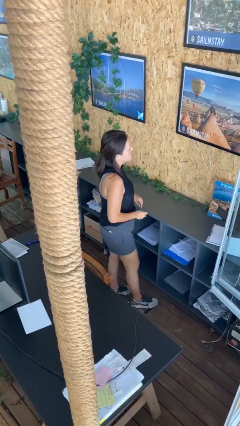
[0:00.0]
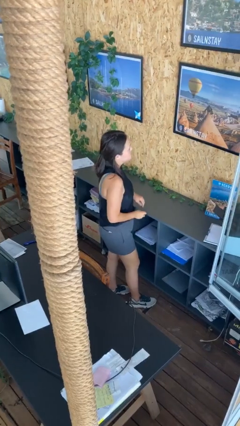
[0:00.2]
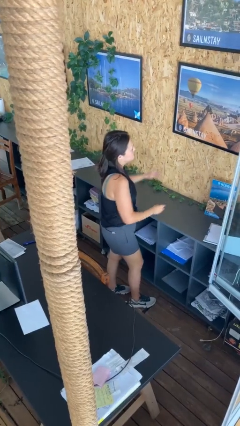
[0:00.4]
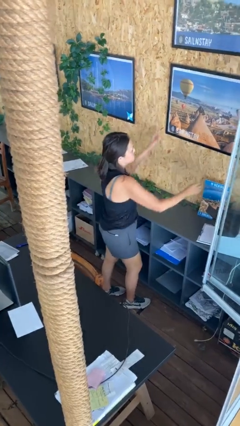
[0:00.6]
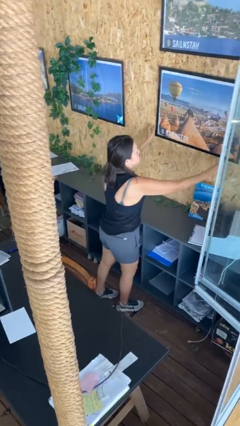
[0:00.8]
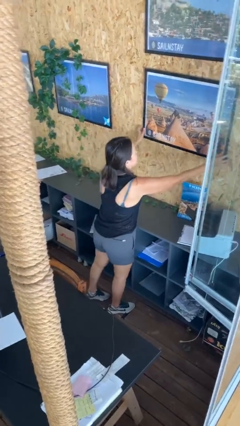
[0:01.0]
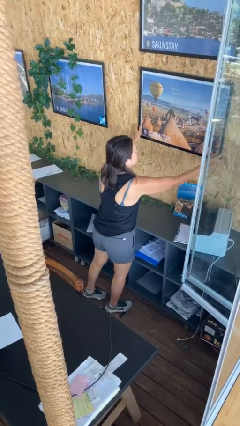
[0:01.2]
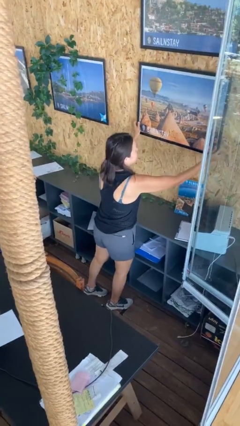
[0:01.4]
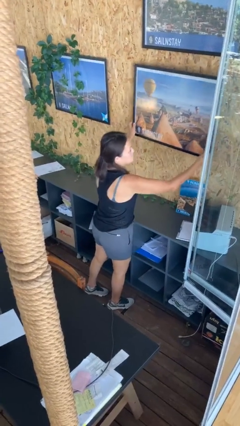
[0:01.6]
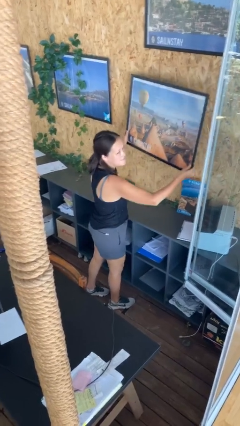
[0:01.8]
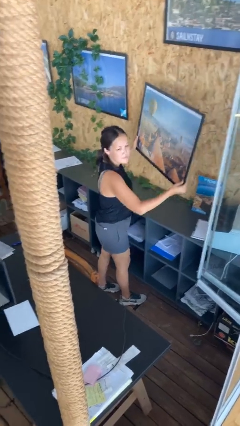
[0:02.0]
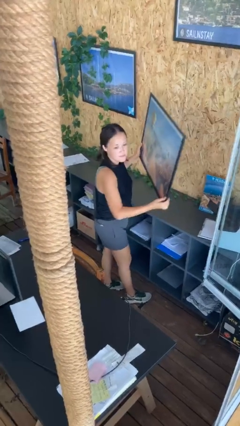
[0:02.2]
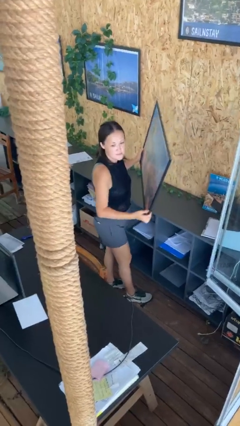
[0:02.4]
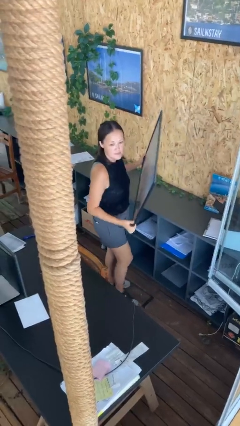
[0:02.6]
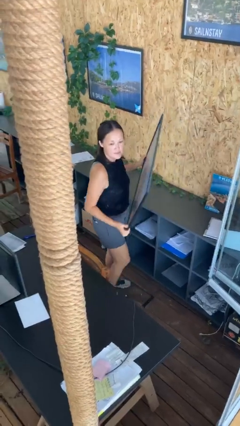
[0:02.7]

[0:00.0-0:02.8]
person takes down picture frame

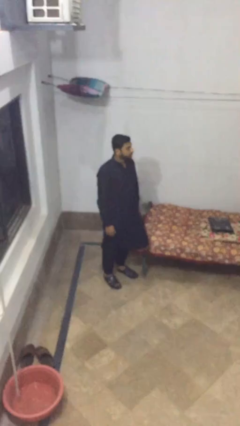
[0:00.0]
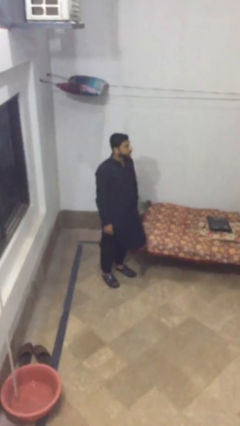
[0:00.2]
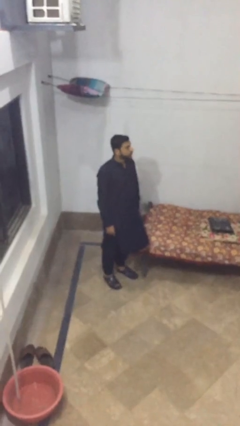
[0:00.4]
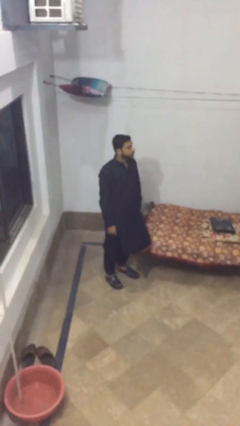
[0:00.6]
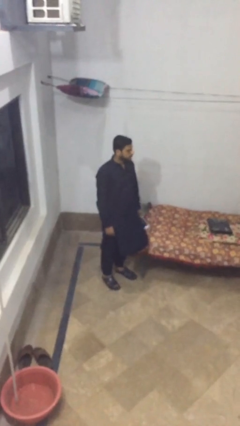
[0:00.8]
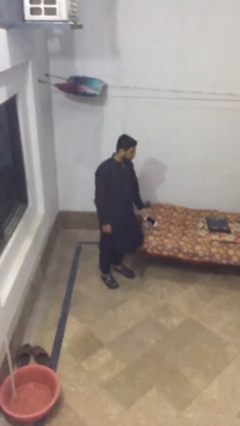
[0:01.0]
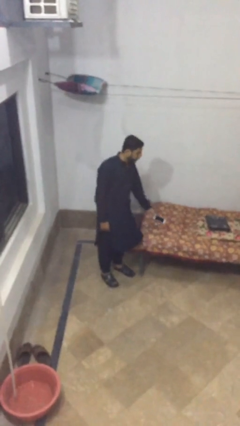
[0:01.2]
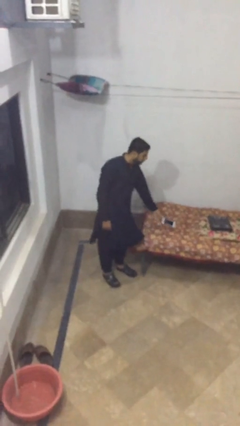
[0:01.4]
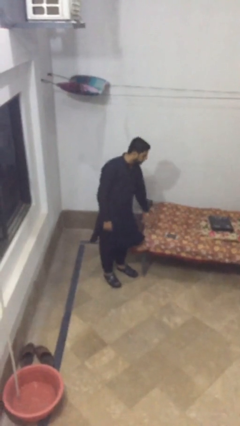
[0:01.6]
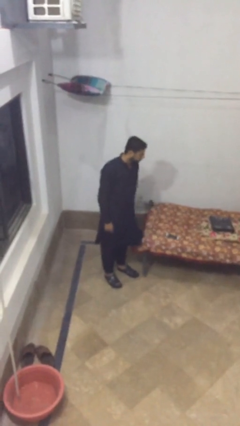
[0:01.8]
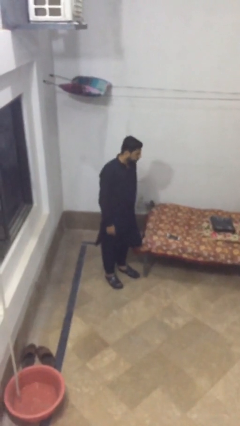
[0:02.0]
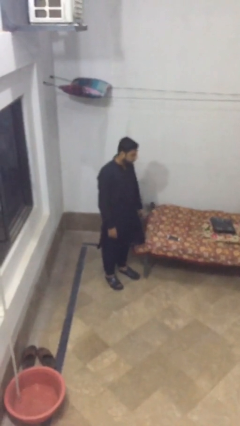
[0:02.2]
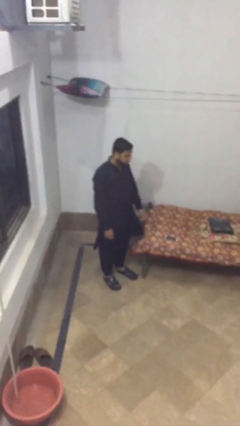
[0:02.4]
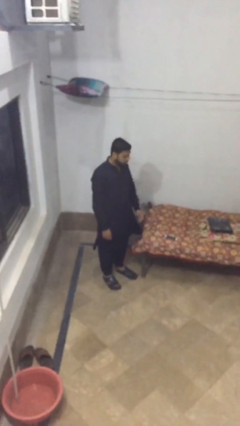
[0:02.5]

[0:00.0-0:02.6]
person puts down object on table

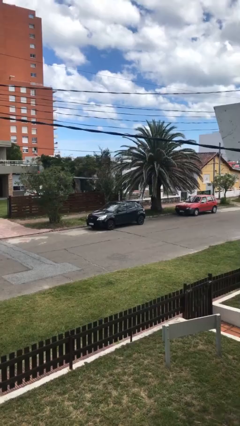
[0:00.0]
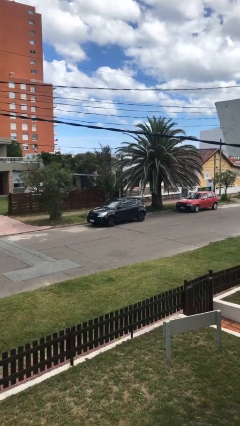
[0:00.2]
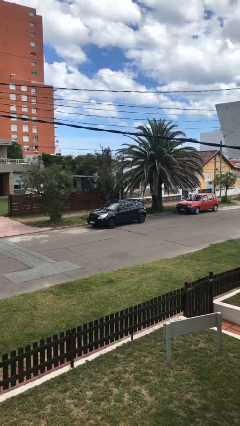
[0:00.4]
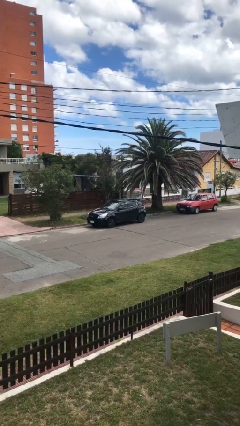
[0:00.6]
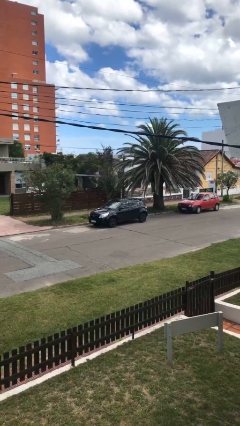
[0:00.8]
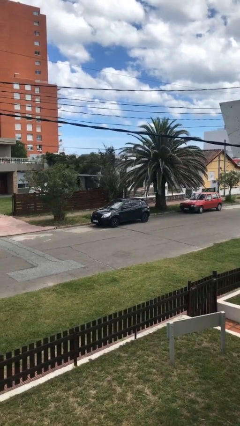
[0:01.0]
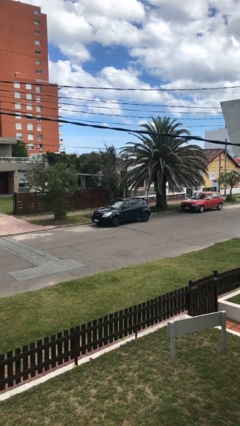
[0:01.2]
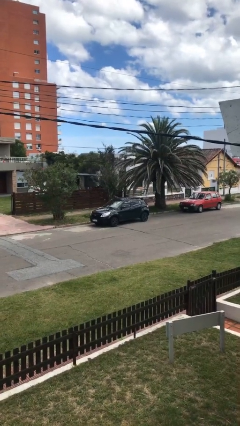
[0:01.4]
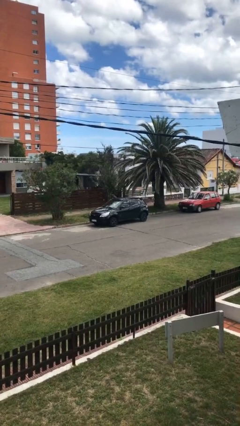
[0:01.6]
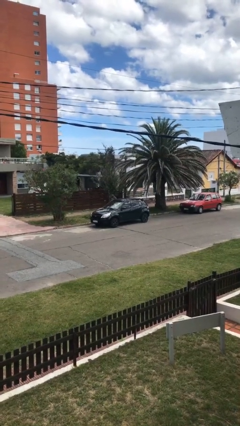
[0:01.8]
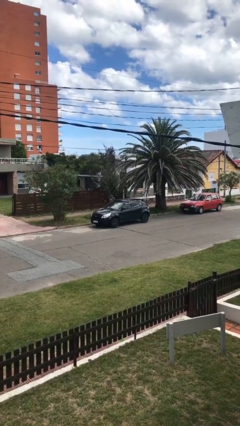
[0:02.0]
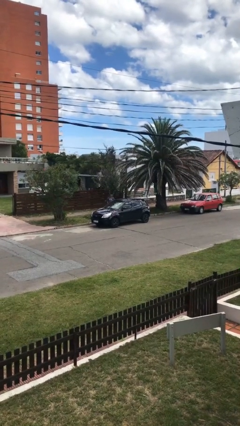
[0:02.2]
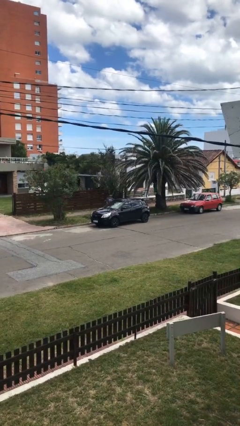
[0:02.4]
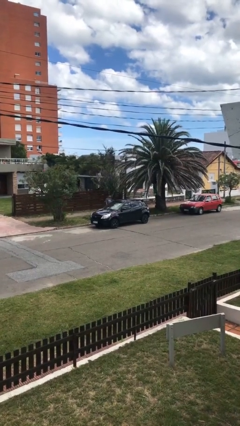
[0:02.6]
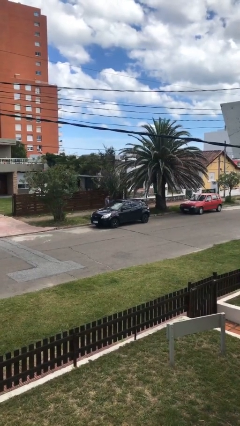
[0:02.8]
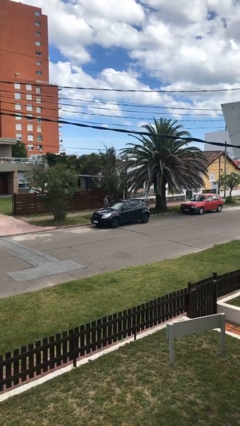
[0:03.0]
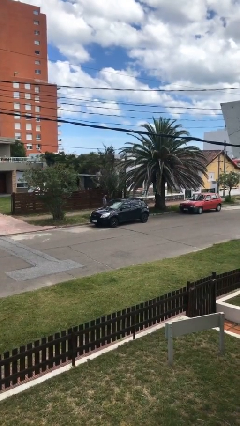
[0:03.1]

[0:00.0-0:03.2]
car drops off person

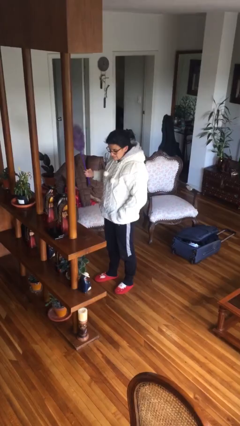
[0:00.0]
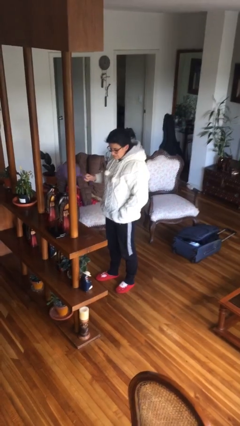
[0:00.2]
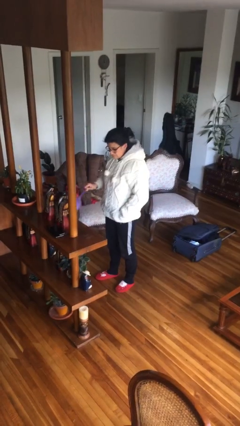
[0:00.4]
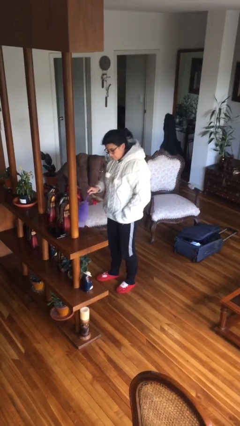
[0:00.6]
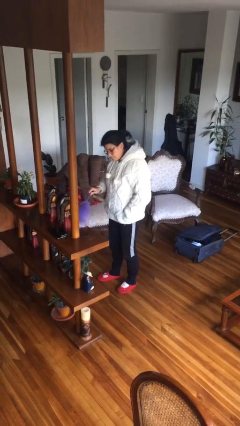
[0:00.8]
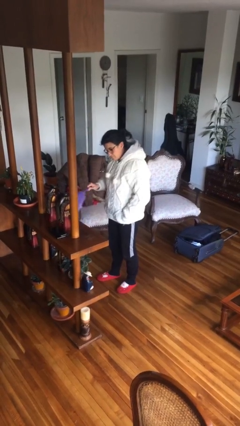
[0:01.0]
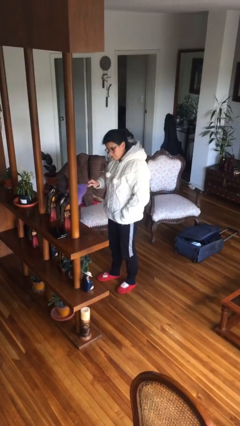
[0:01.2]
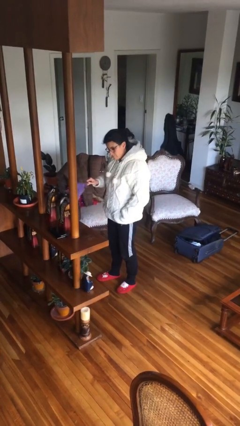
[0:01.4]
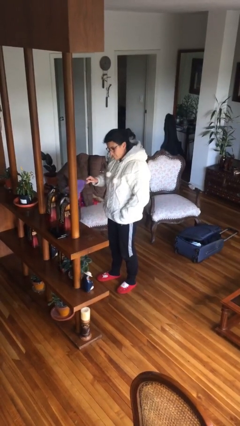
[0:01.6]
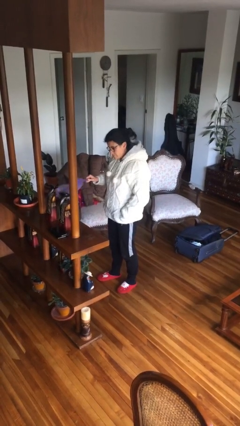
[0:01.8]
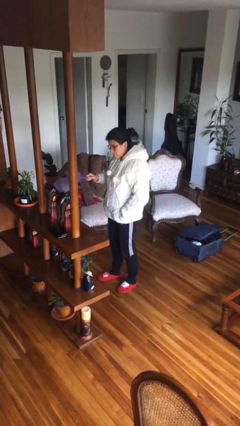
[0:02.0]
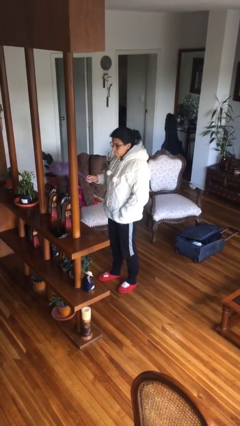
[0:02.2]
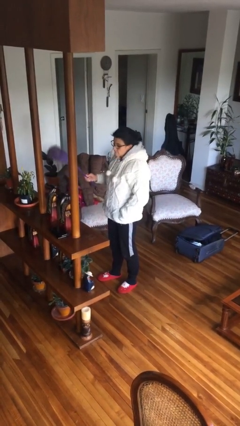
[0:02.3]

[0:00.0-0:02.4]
person dusts furniture

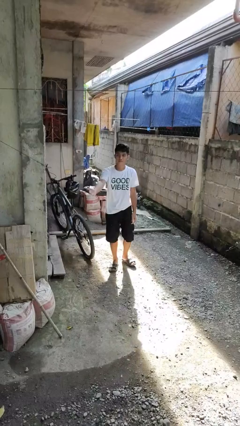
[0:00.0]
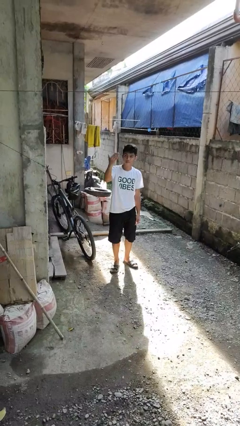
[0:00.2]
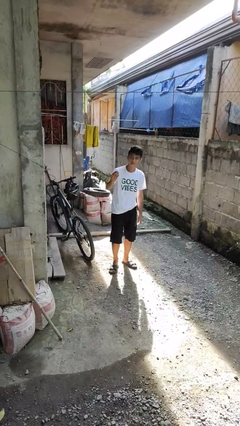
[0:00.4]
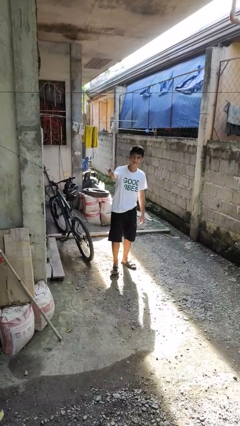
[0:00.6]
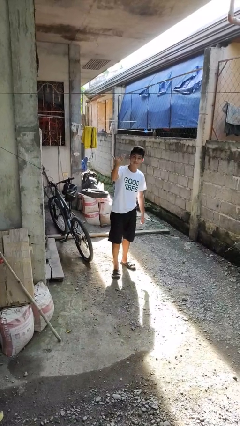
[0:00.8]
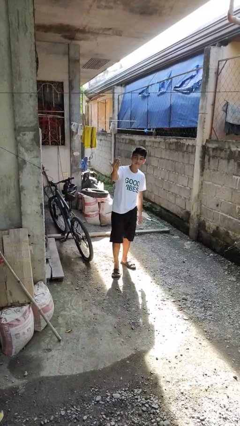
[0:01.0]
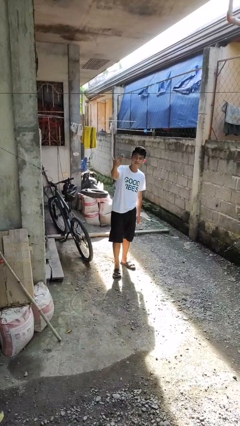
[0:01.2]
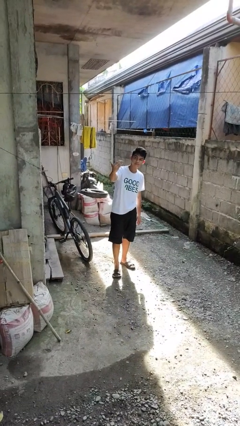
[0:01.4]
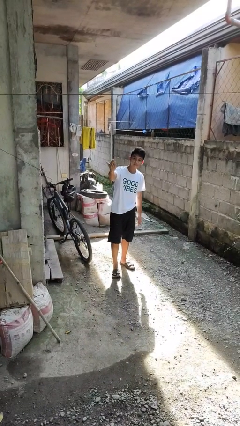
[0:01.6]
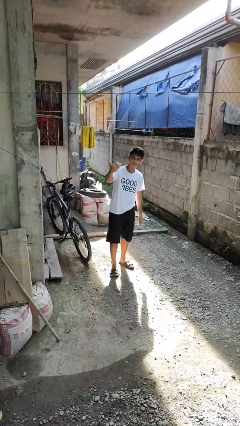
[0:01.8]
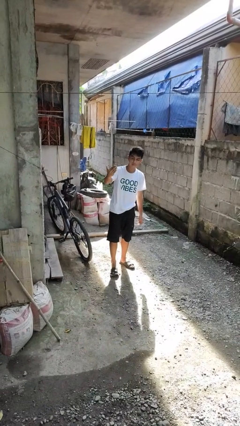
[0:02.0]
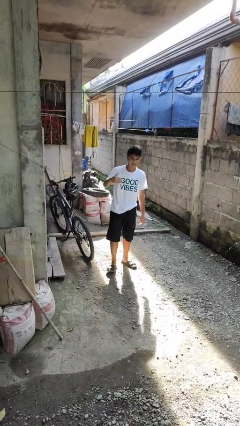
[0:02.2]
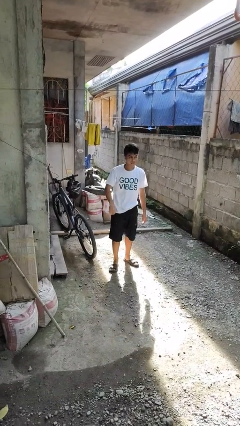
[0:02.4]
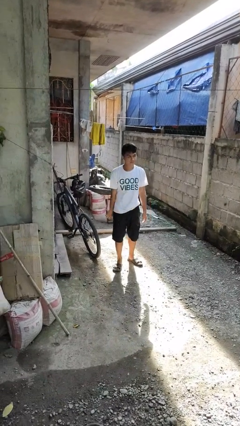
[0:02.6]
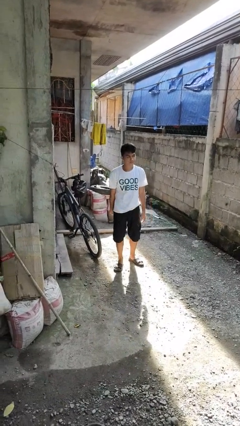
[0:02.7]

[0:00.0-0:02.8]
person gestures come here

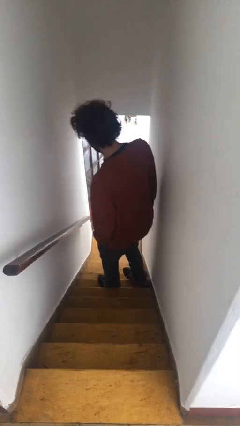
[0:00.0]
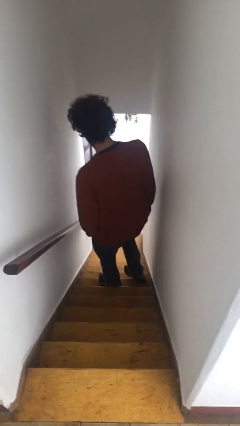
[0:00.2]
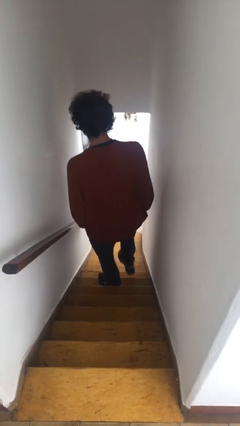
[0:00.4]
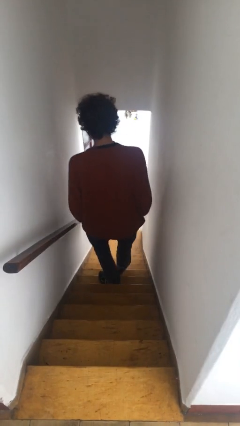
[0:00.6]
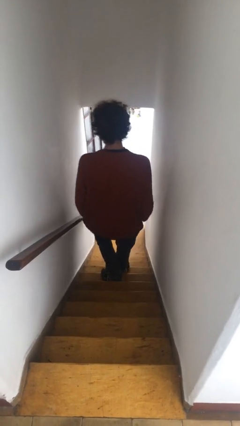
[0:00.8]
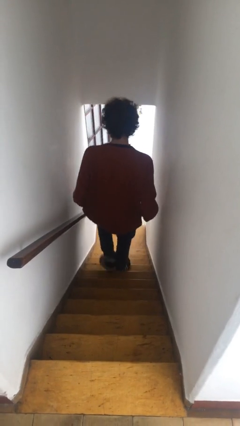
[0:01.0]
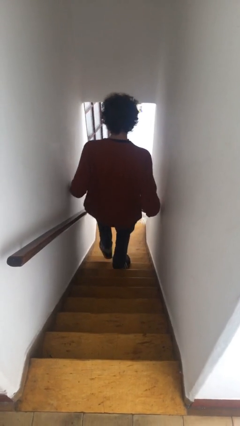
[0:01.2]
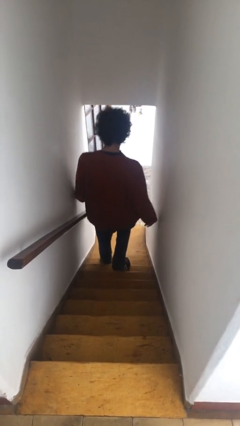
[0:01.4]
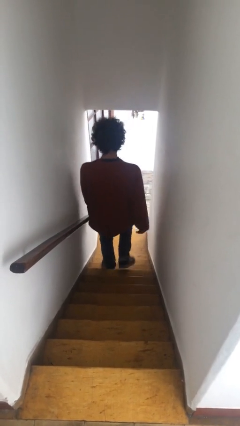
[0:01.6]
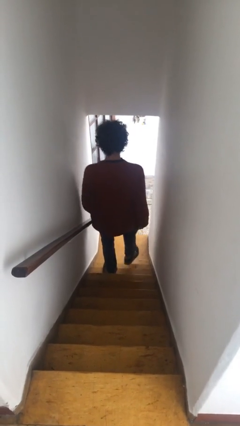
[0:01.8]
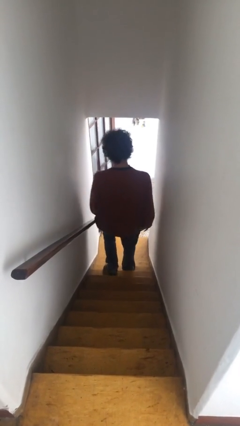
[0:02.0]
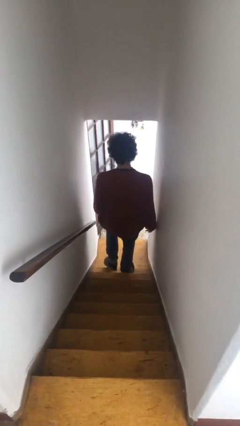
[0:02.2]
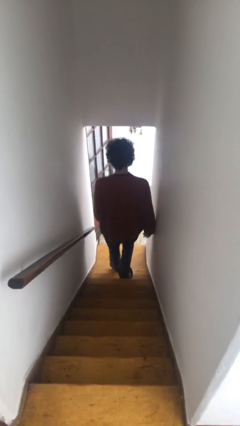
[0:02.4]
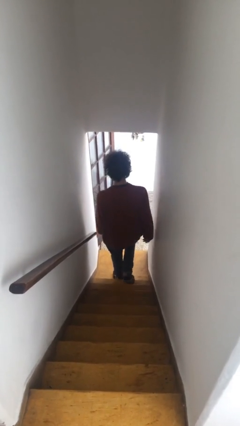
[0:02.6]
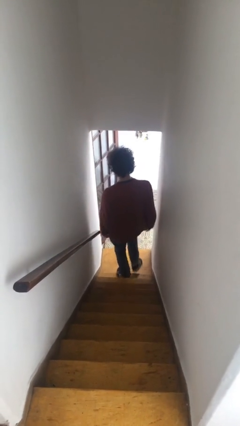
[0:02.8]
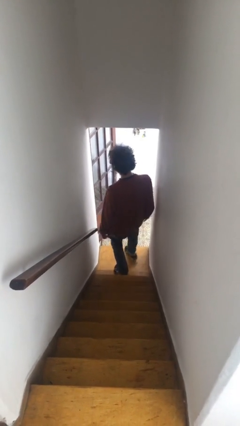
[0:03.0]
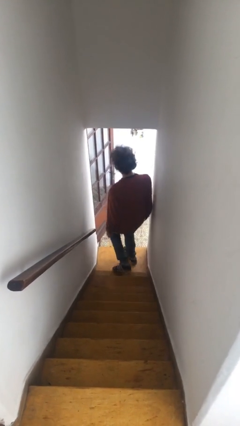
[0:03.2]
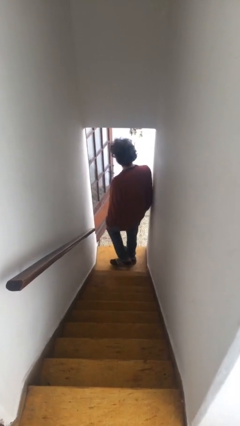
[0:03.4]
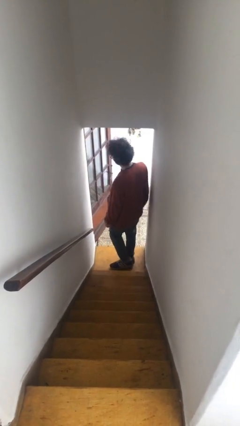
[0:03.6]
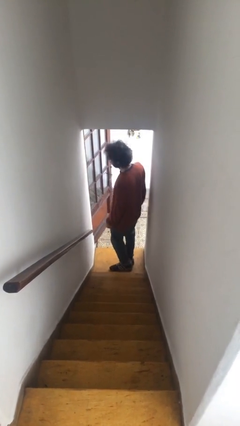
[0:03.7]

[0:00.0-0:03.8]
person climbs down stairs
